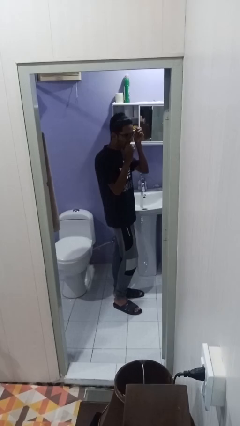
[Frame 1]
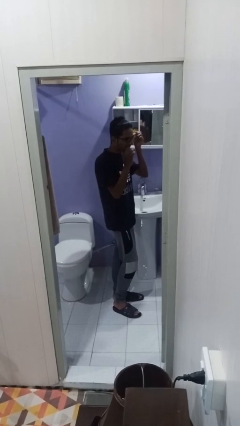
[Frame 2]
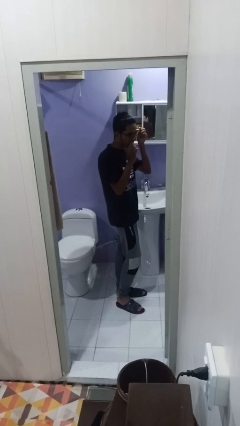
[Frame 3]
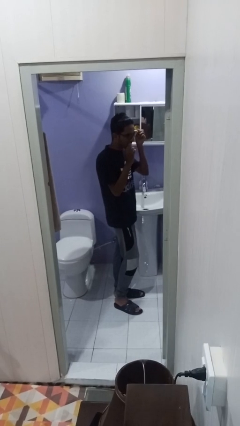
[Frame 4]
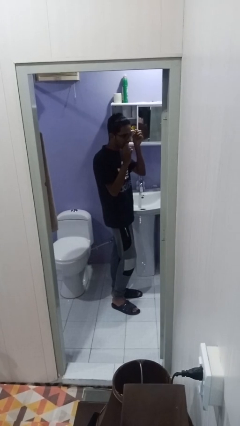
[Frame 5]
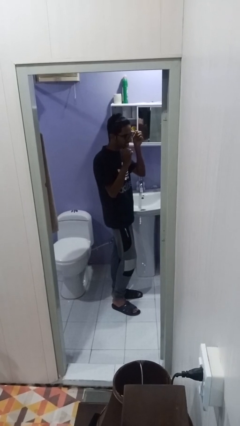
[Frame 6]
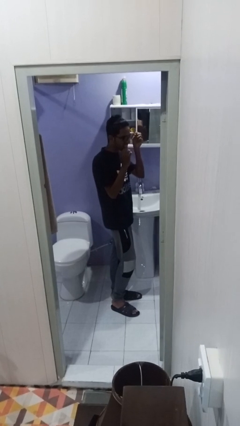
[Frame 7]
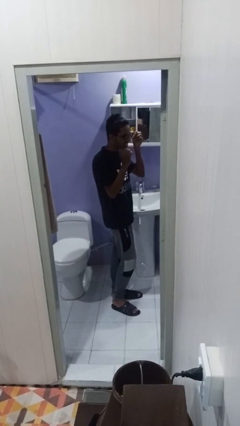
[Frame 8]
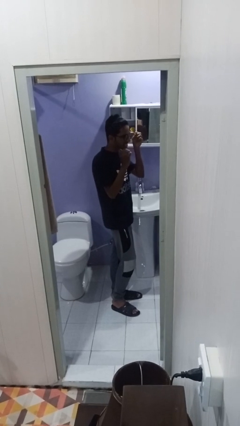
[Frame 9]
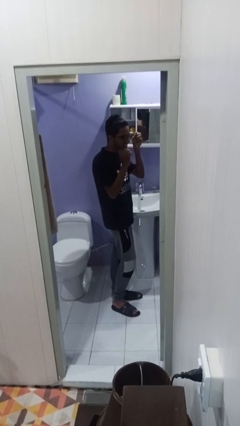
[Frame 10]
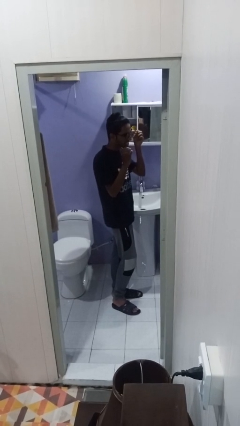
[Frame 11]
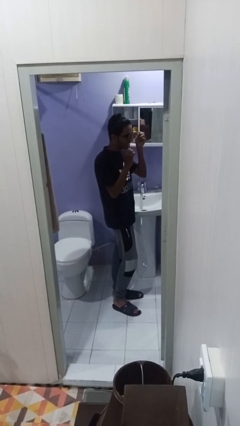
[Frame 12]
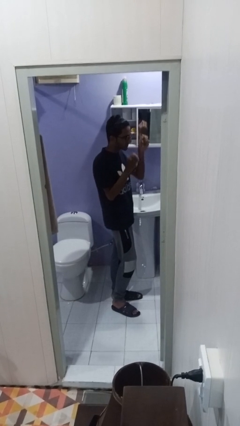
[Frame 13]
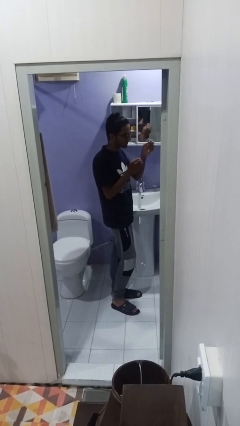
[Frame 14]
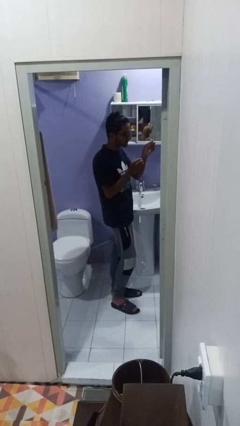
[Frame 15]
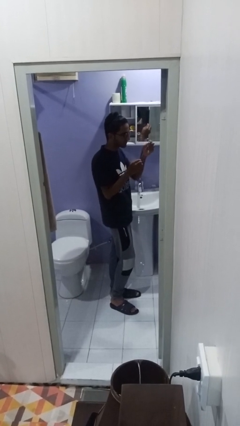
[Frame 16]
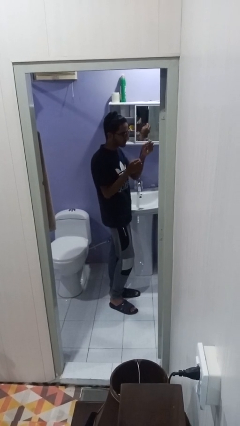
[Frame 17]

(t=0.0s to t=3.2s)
person flosses

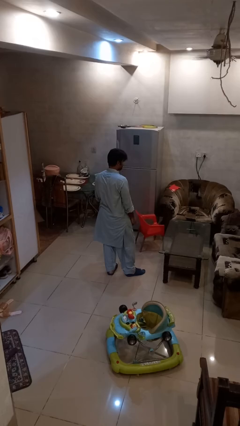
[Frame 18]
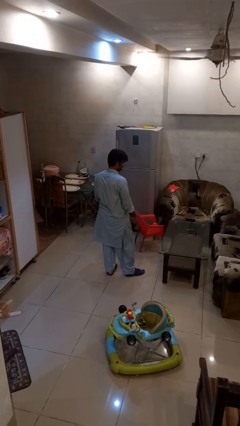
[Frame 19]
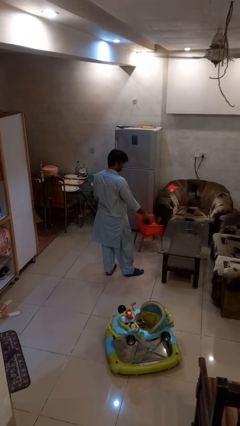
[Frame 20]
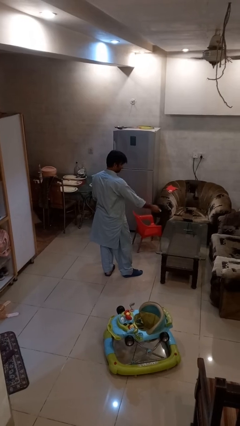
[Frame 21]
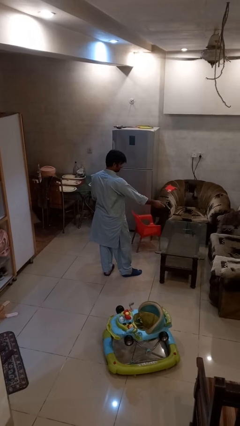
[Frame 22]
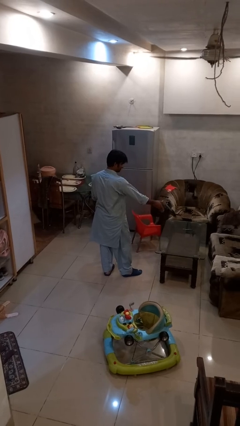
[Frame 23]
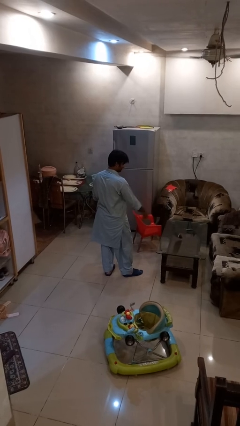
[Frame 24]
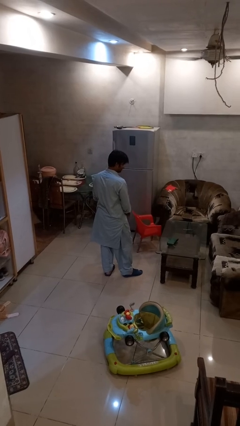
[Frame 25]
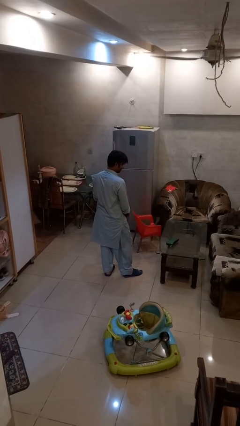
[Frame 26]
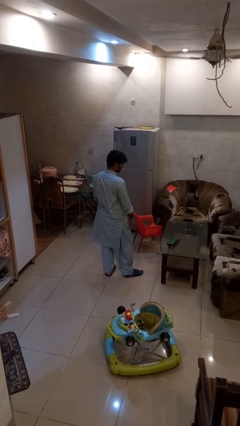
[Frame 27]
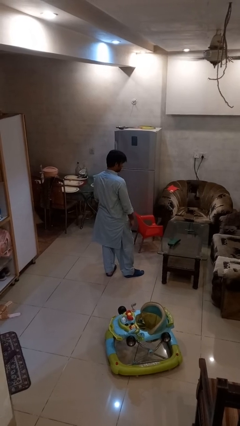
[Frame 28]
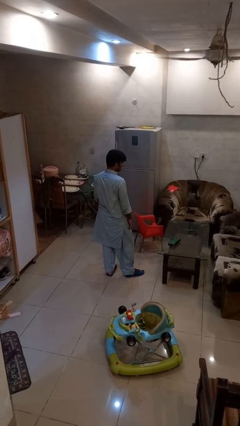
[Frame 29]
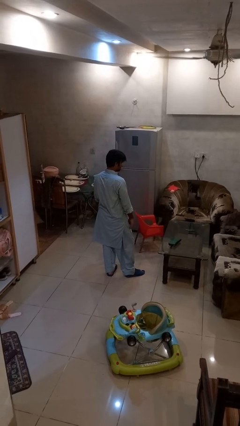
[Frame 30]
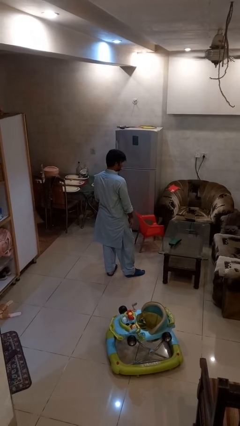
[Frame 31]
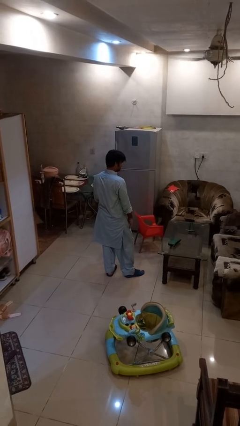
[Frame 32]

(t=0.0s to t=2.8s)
person throws object on table

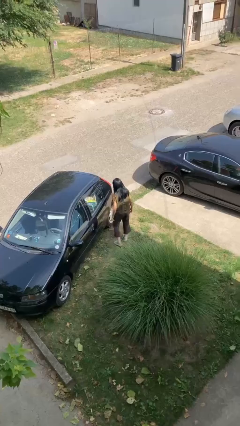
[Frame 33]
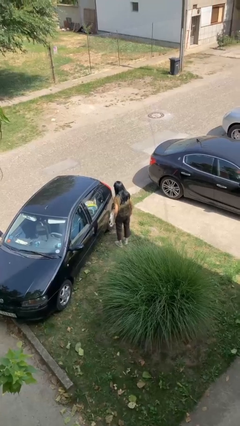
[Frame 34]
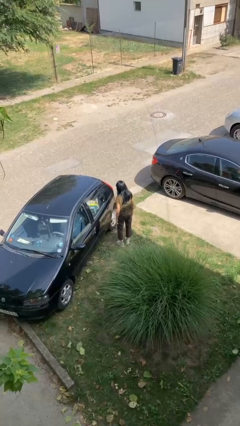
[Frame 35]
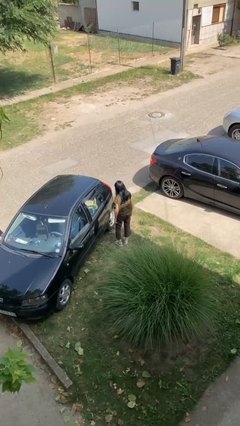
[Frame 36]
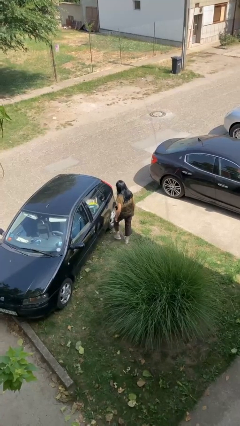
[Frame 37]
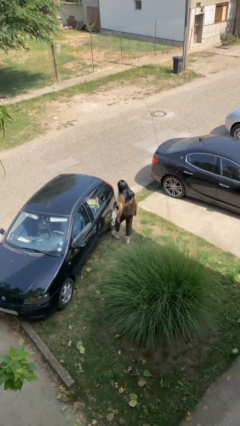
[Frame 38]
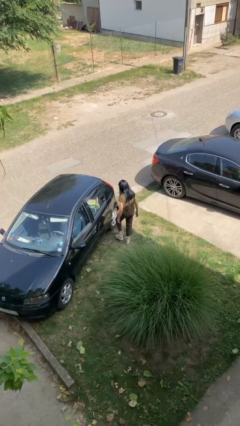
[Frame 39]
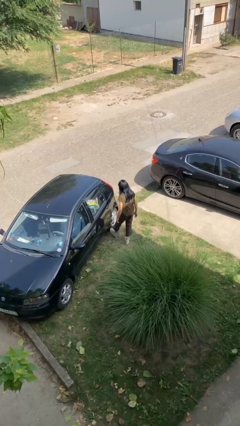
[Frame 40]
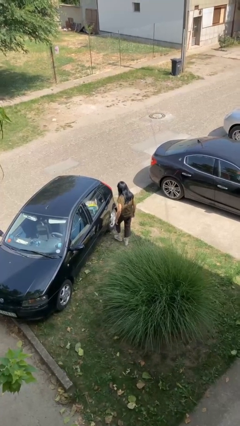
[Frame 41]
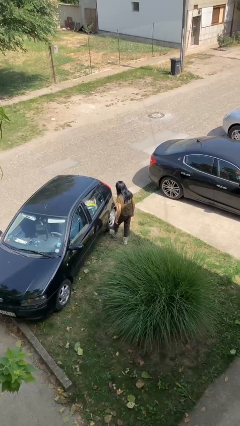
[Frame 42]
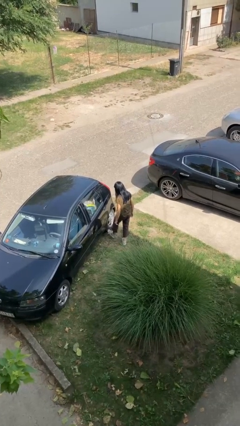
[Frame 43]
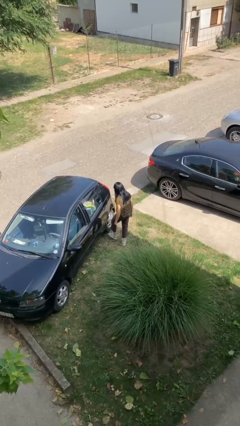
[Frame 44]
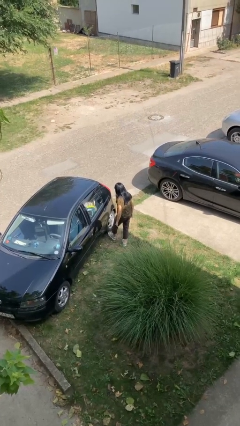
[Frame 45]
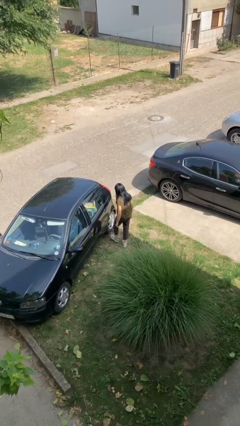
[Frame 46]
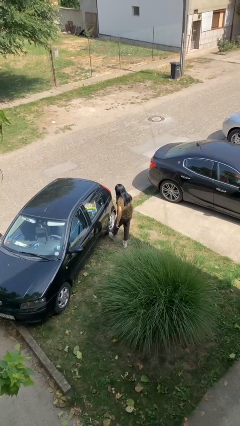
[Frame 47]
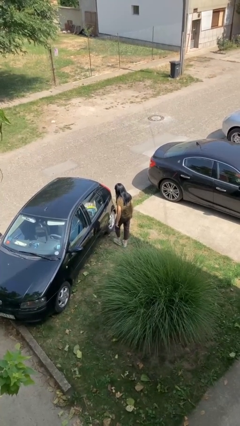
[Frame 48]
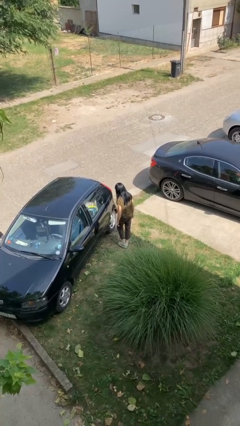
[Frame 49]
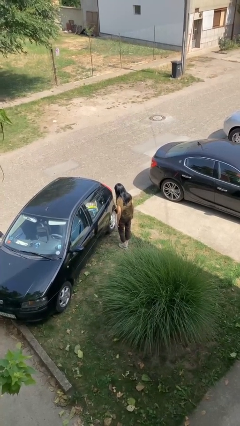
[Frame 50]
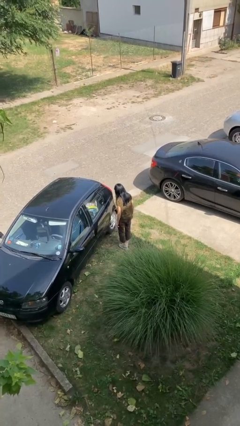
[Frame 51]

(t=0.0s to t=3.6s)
person kicks car tires

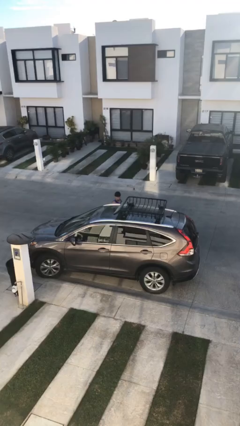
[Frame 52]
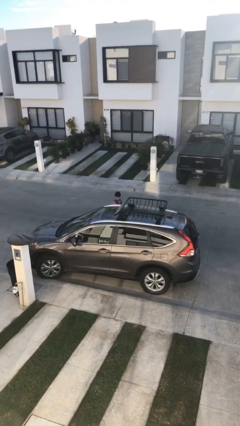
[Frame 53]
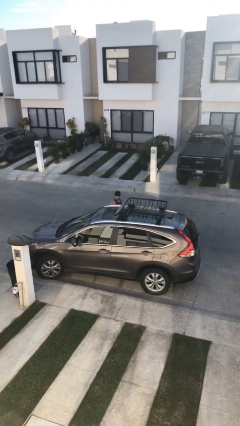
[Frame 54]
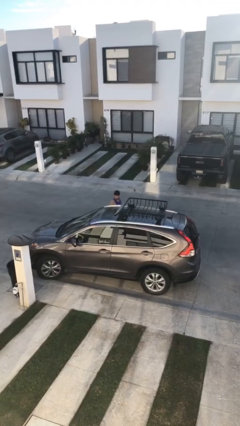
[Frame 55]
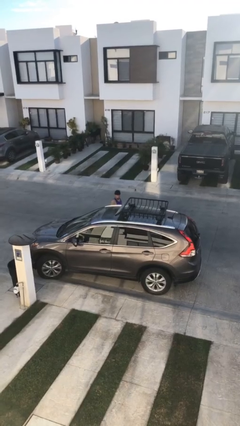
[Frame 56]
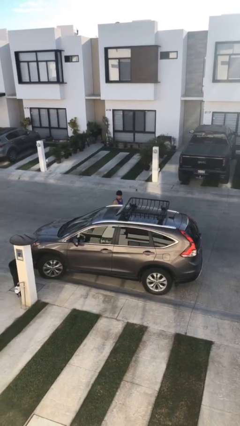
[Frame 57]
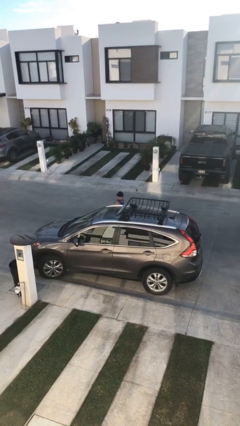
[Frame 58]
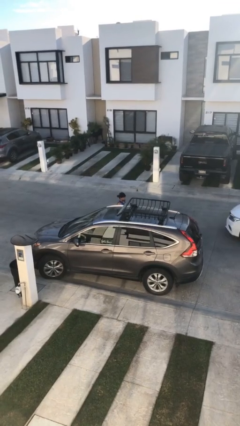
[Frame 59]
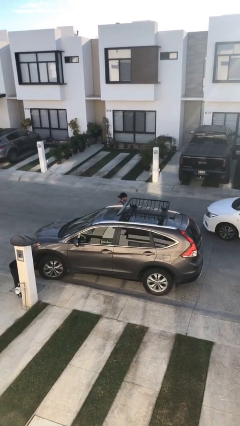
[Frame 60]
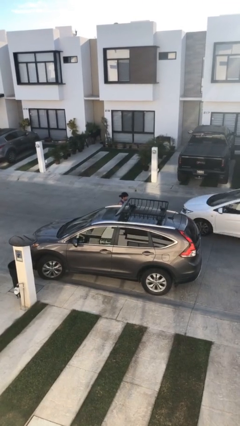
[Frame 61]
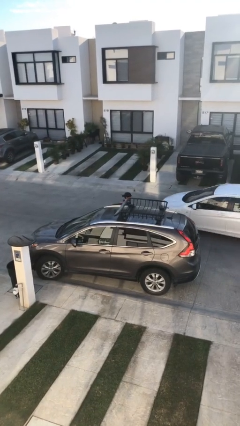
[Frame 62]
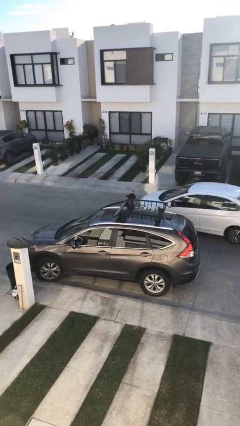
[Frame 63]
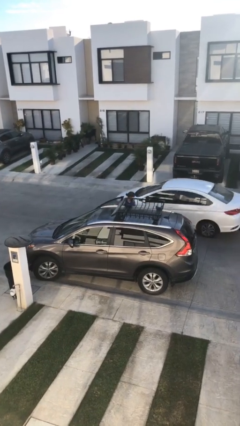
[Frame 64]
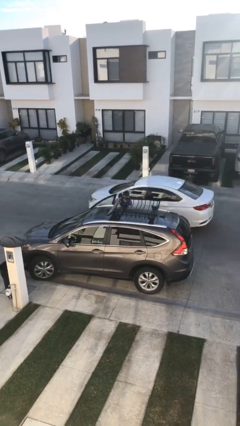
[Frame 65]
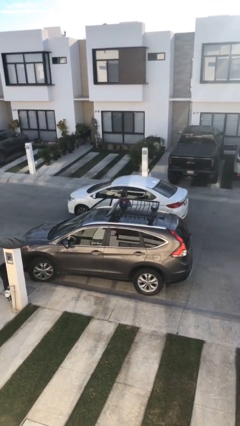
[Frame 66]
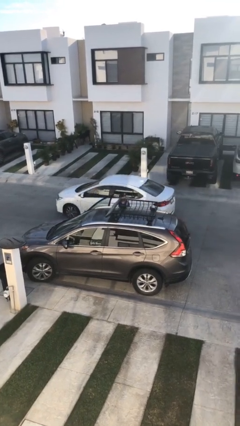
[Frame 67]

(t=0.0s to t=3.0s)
person opens car door

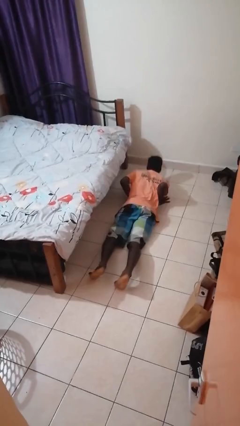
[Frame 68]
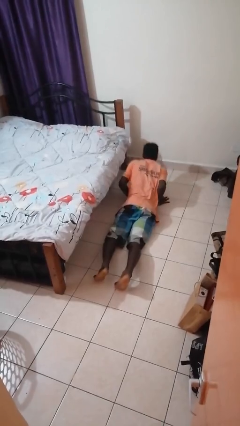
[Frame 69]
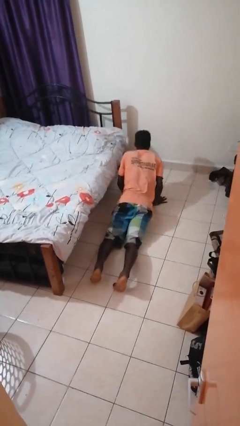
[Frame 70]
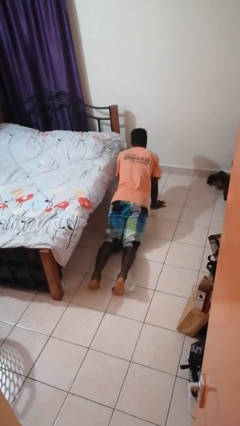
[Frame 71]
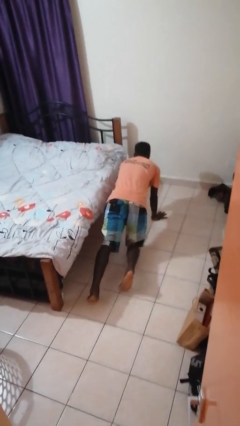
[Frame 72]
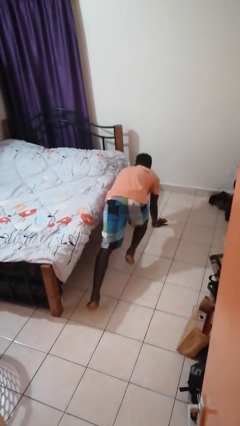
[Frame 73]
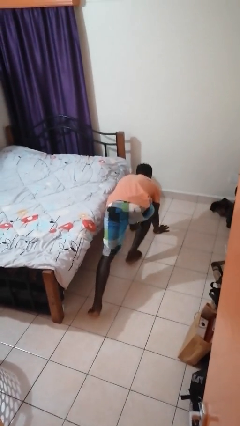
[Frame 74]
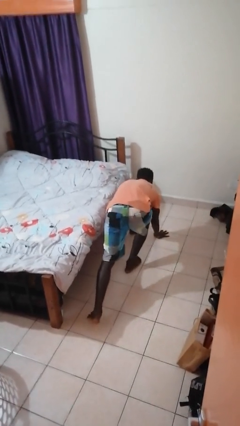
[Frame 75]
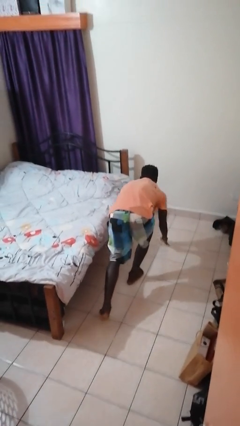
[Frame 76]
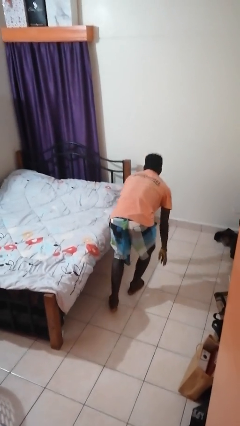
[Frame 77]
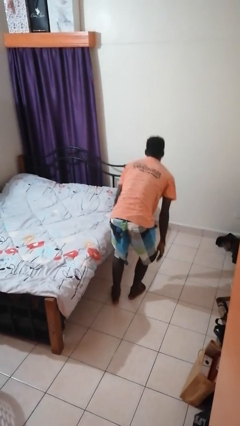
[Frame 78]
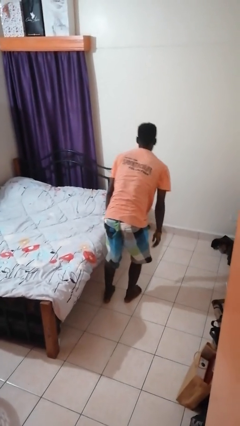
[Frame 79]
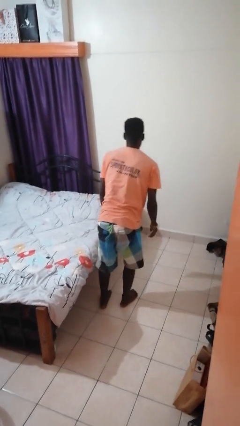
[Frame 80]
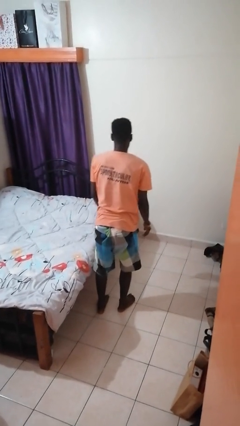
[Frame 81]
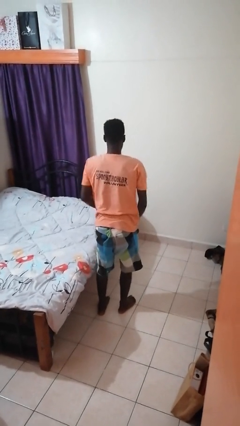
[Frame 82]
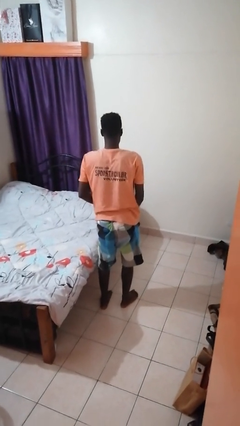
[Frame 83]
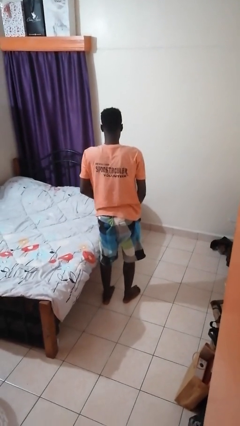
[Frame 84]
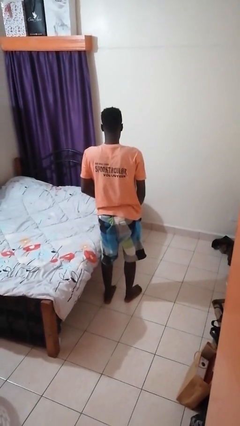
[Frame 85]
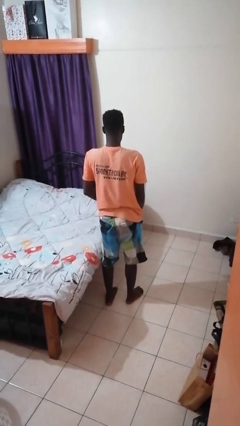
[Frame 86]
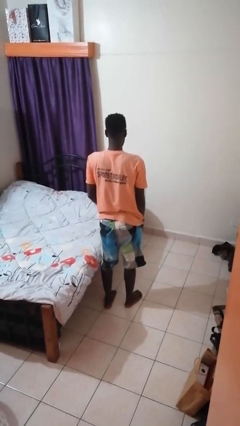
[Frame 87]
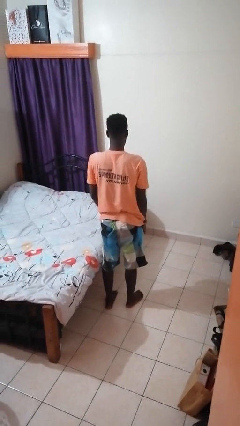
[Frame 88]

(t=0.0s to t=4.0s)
person stands up from floor

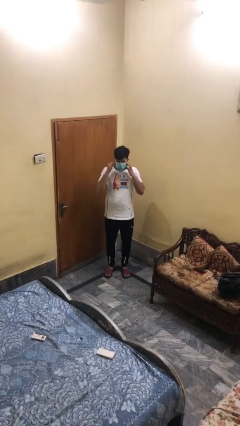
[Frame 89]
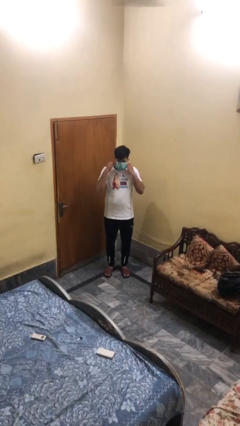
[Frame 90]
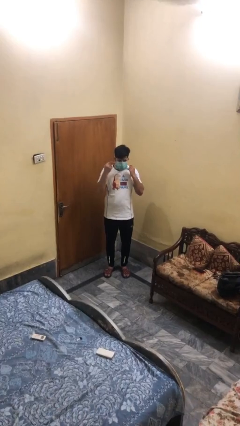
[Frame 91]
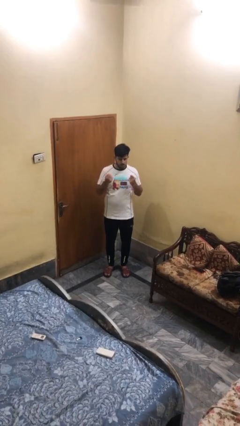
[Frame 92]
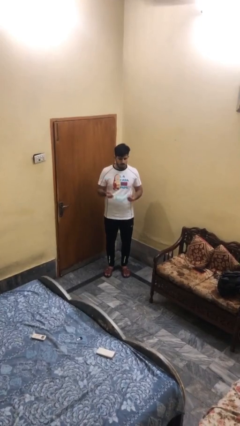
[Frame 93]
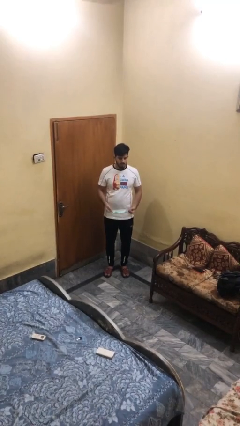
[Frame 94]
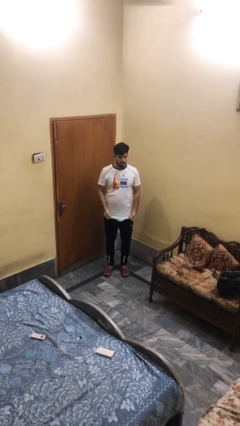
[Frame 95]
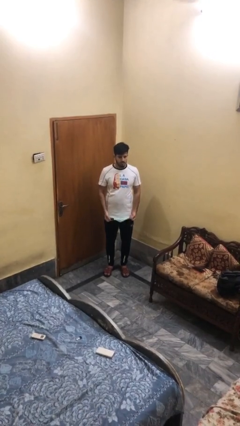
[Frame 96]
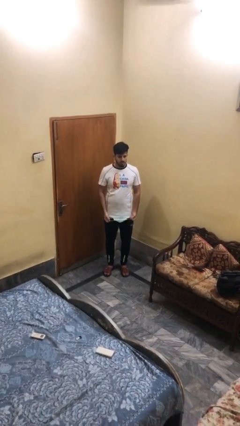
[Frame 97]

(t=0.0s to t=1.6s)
person takes off facemask
